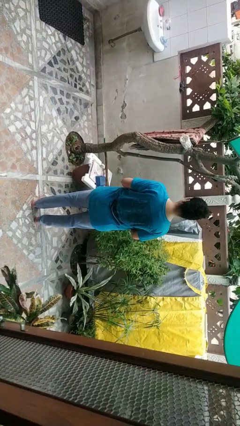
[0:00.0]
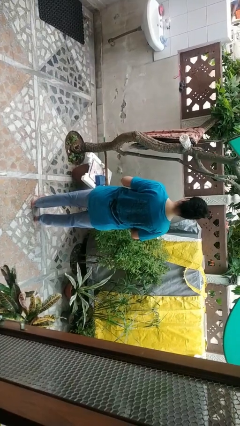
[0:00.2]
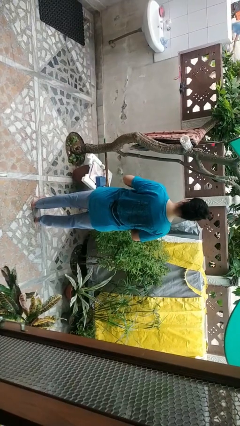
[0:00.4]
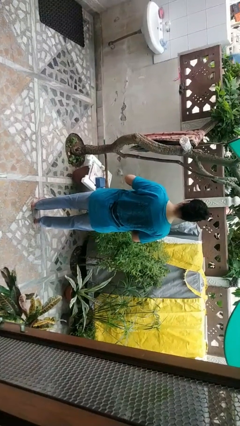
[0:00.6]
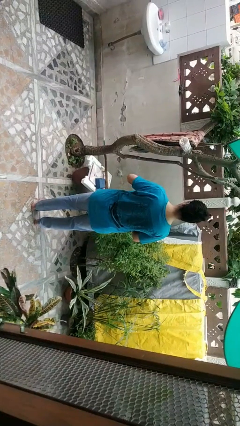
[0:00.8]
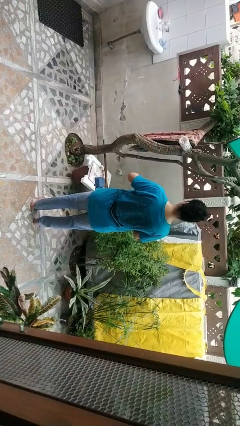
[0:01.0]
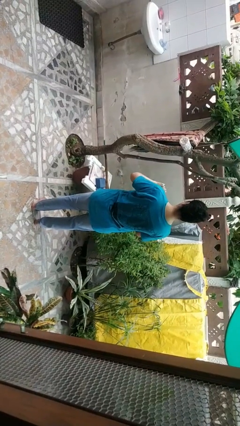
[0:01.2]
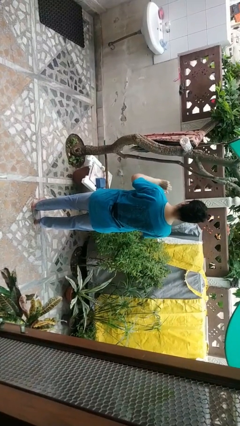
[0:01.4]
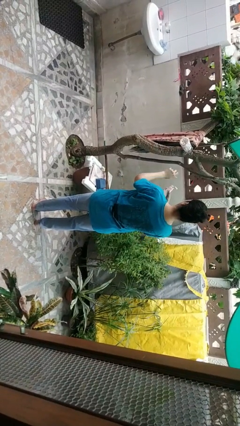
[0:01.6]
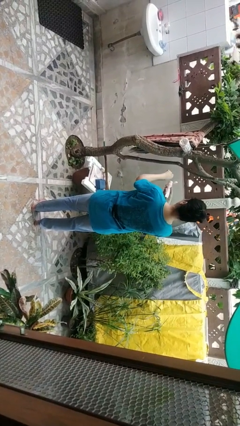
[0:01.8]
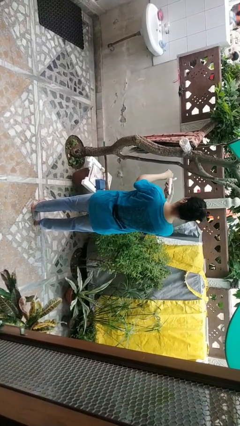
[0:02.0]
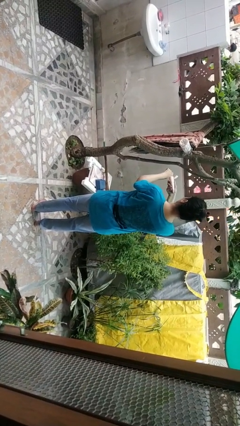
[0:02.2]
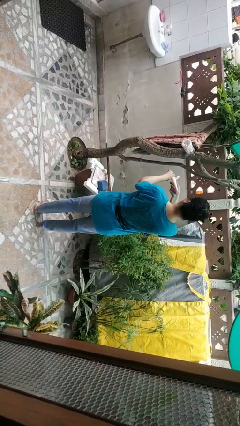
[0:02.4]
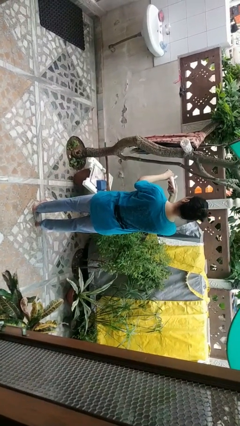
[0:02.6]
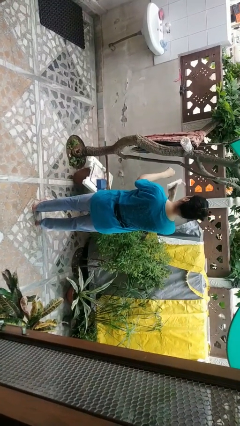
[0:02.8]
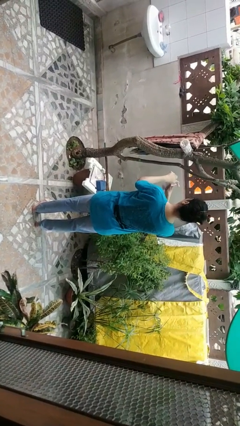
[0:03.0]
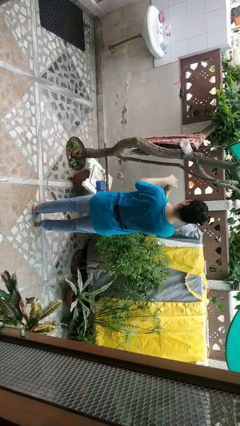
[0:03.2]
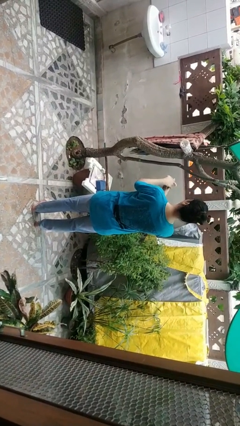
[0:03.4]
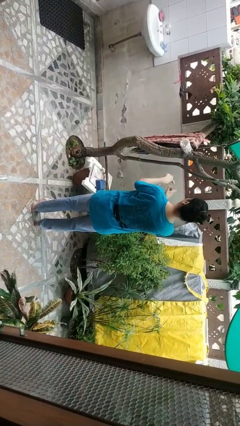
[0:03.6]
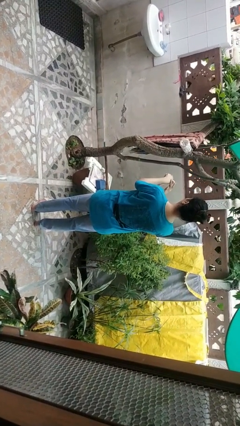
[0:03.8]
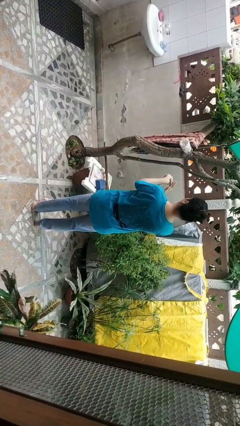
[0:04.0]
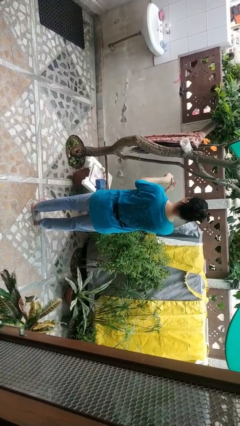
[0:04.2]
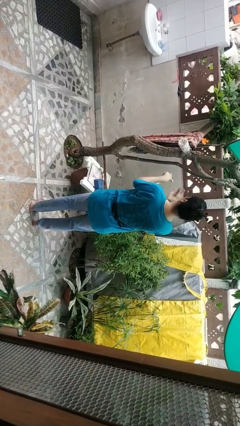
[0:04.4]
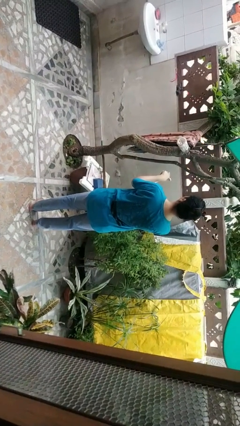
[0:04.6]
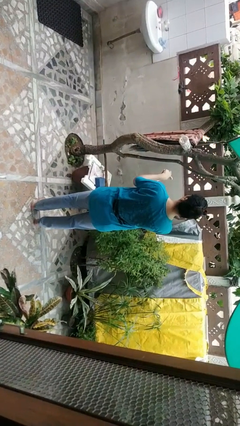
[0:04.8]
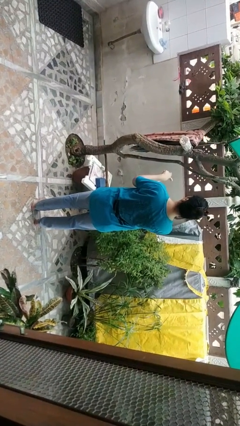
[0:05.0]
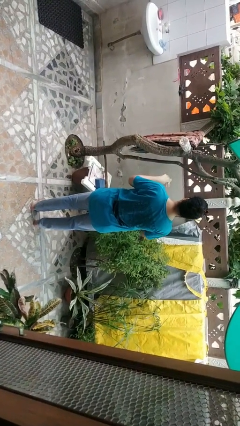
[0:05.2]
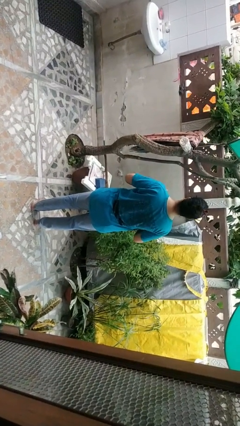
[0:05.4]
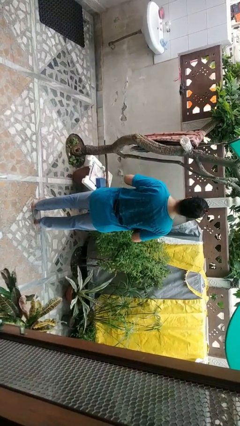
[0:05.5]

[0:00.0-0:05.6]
person applies facial moisturizer

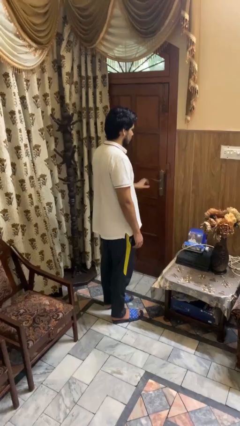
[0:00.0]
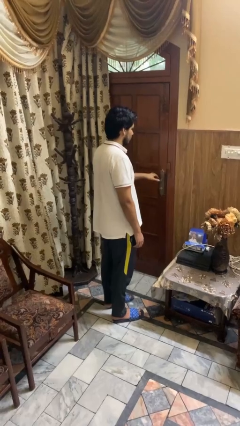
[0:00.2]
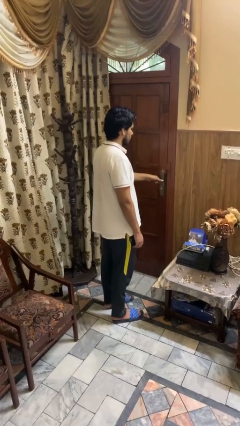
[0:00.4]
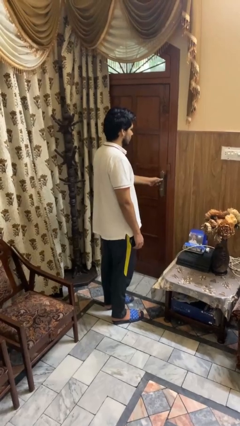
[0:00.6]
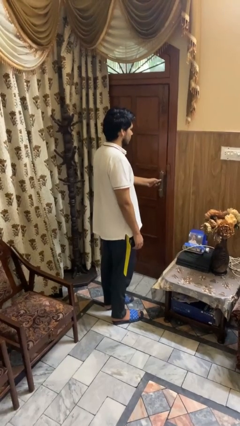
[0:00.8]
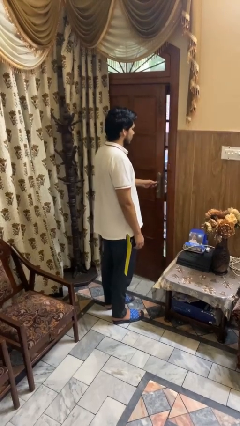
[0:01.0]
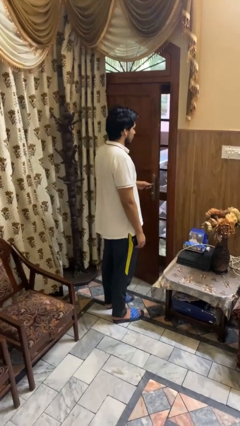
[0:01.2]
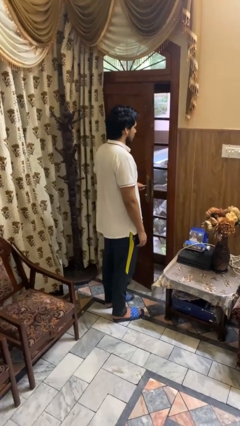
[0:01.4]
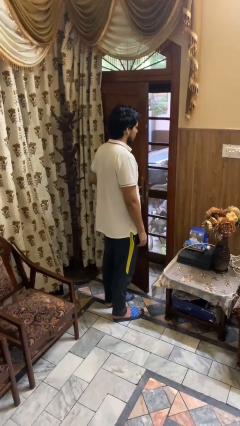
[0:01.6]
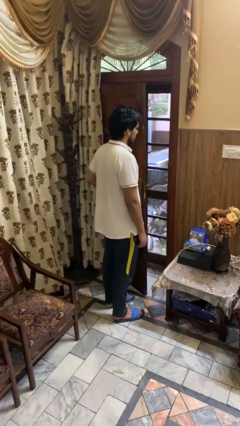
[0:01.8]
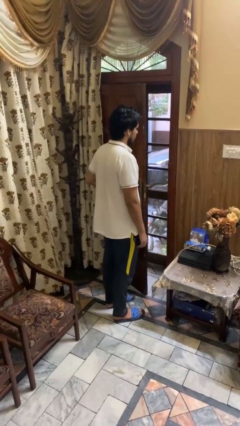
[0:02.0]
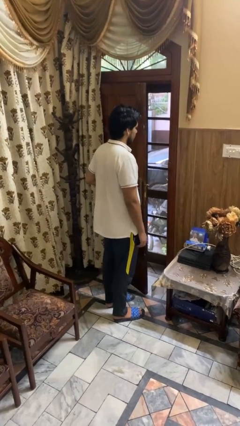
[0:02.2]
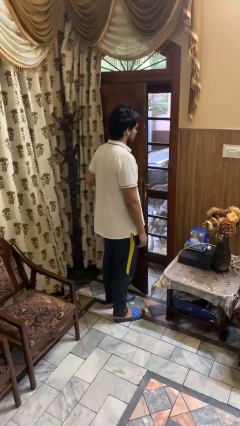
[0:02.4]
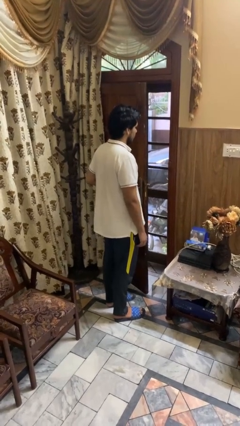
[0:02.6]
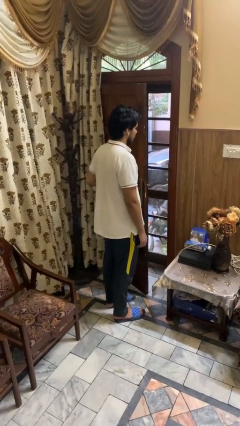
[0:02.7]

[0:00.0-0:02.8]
person opens facility door

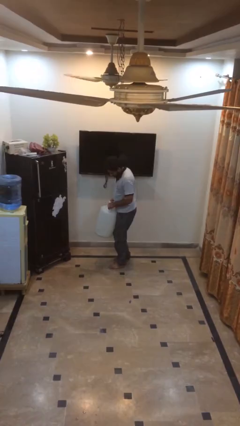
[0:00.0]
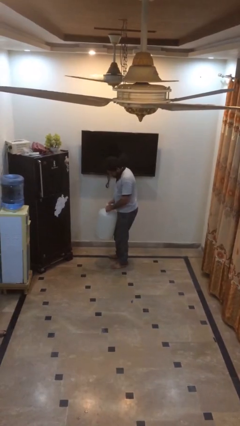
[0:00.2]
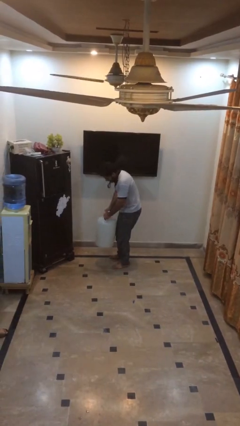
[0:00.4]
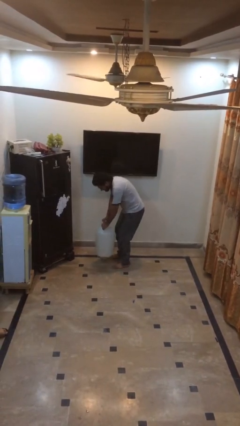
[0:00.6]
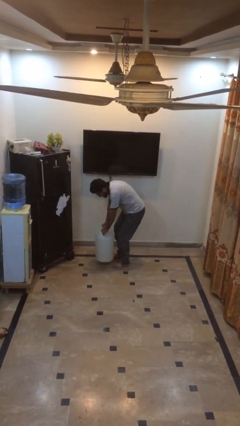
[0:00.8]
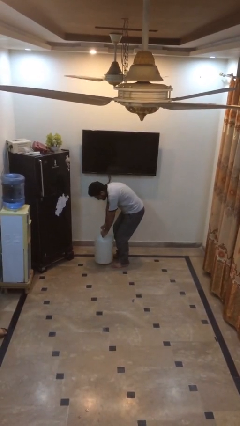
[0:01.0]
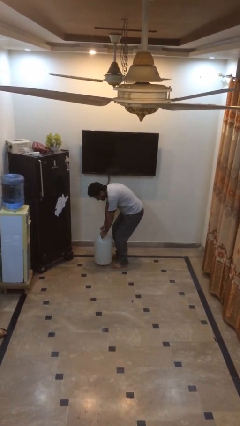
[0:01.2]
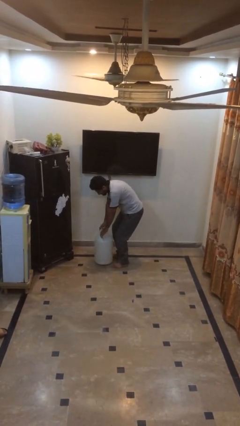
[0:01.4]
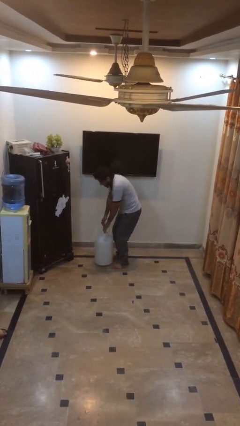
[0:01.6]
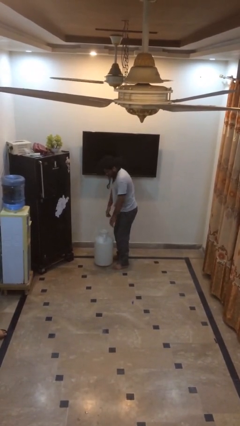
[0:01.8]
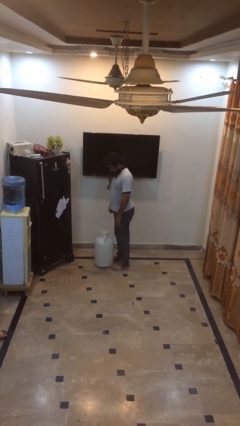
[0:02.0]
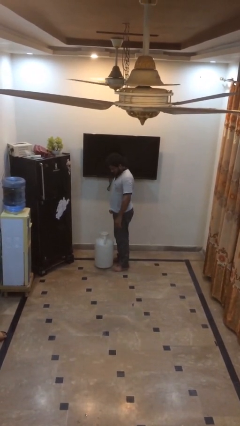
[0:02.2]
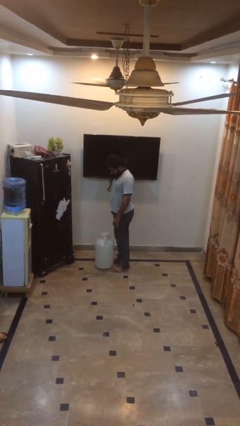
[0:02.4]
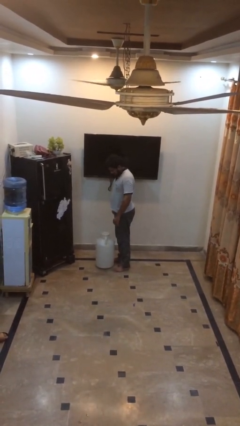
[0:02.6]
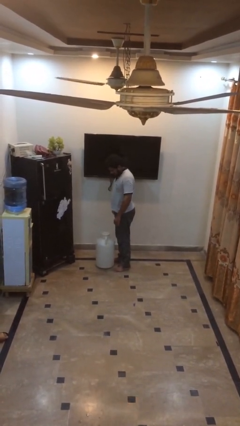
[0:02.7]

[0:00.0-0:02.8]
person puts down object on floor

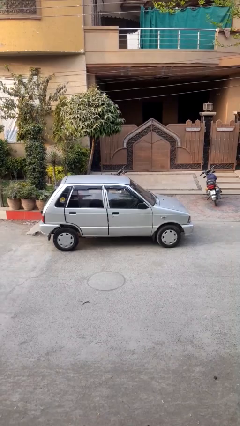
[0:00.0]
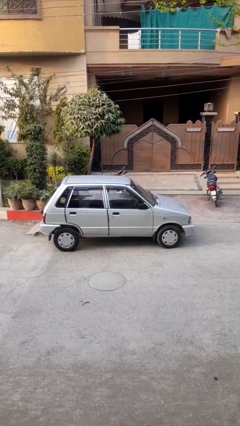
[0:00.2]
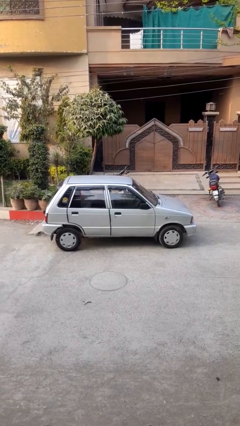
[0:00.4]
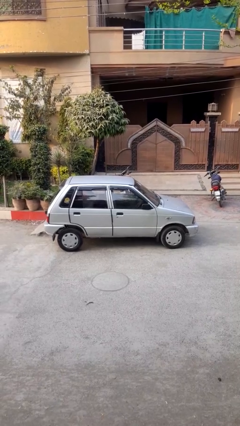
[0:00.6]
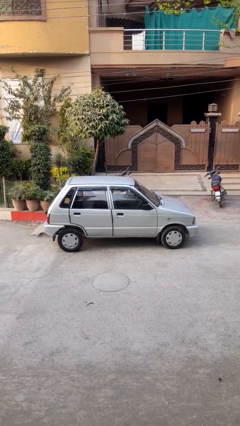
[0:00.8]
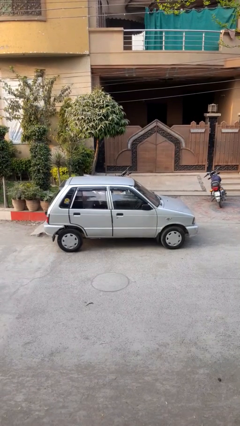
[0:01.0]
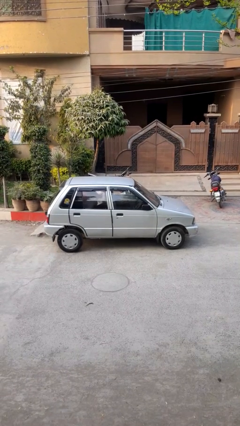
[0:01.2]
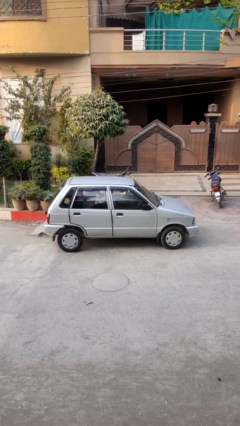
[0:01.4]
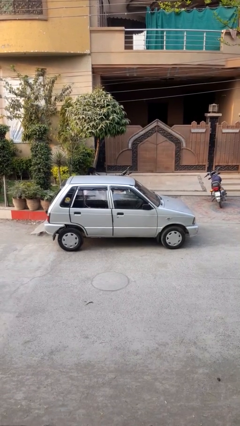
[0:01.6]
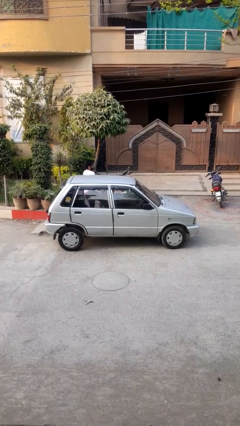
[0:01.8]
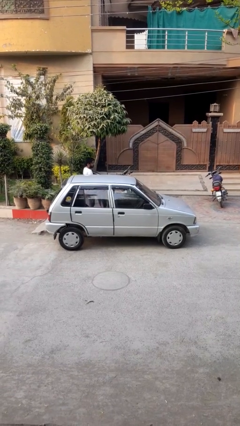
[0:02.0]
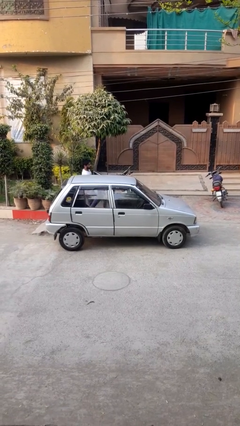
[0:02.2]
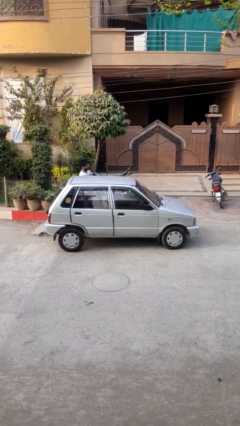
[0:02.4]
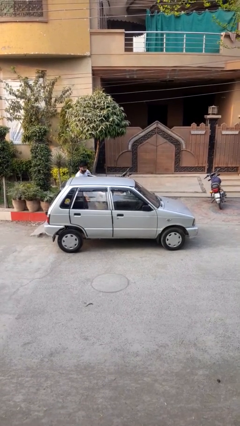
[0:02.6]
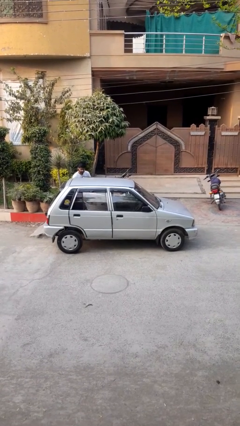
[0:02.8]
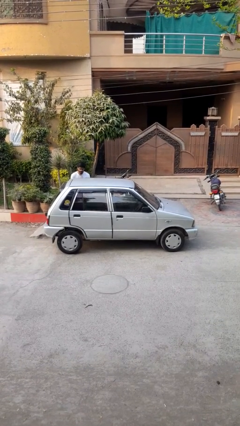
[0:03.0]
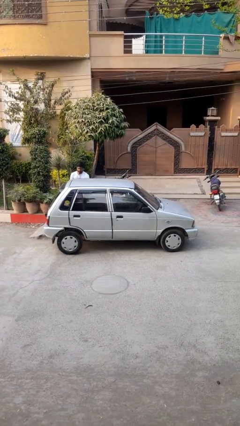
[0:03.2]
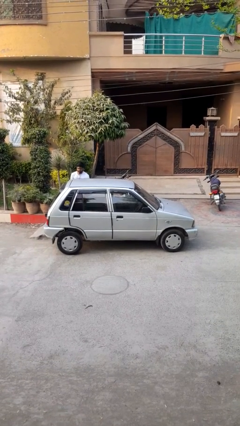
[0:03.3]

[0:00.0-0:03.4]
car drops off person

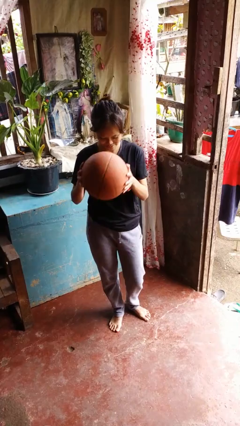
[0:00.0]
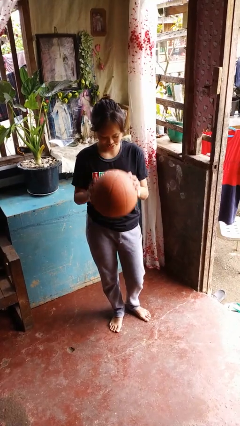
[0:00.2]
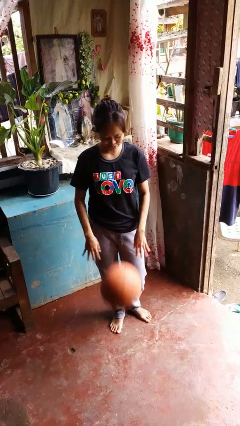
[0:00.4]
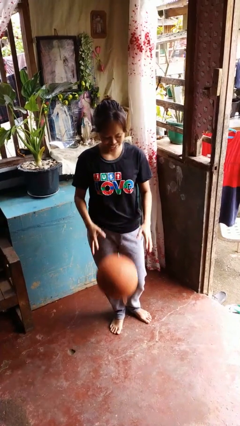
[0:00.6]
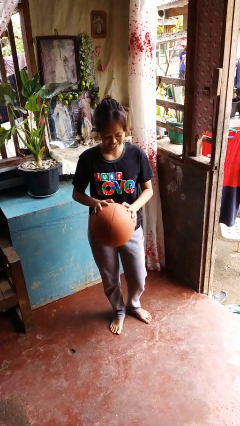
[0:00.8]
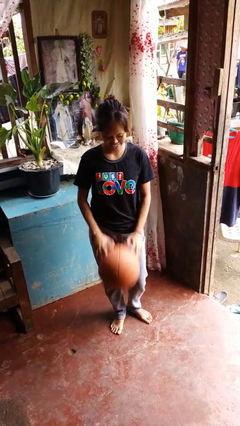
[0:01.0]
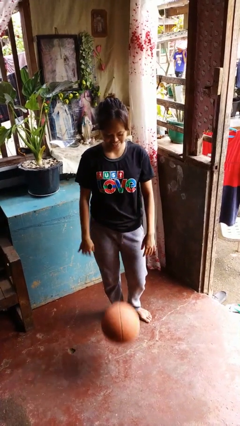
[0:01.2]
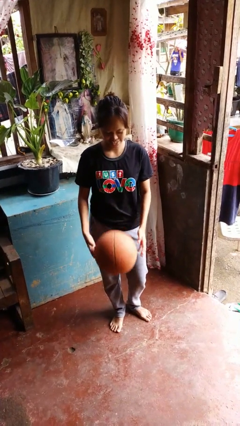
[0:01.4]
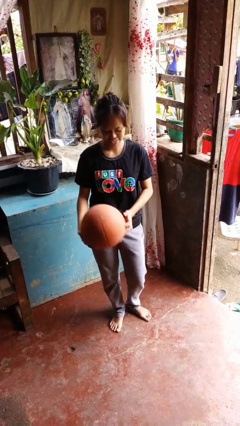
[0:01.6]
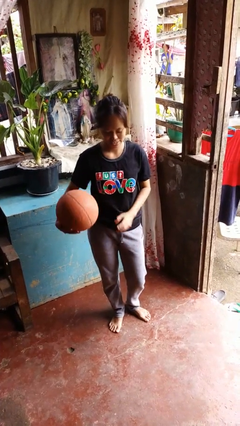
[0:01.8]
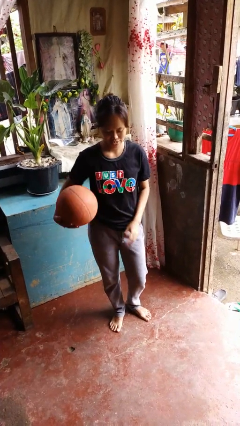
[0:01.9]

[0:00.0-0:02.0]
person bounces ball on floor

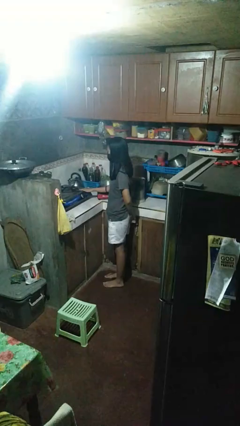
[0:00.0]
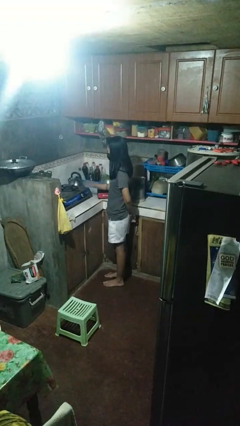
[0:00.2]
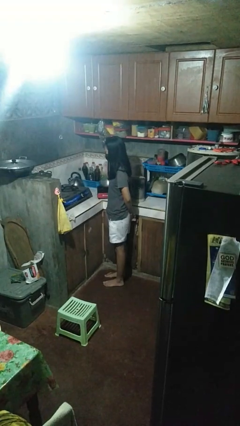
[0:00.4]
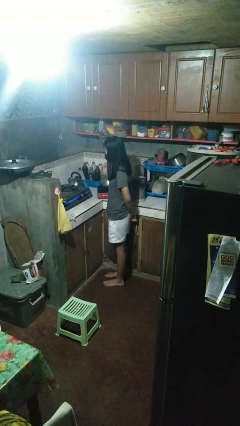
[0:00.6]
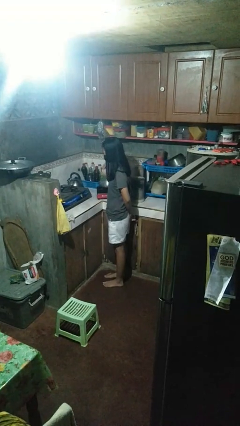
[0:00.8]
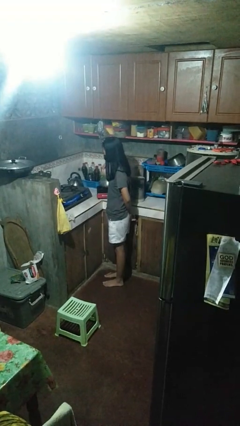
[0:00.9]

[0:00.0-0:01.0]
person burns hand
